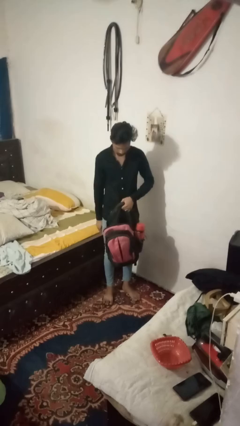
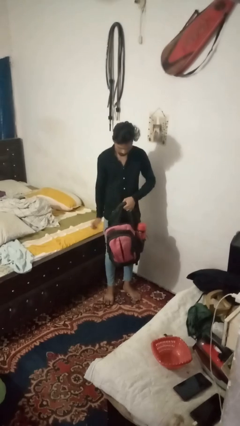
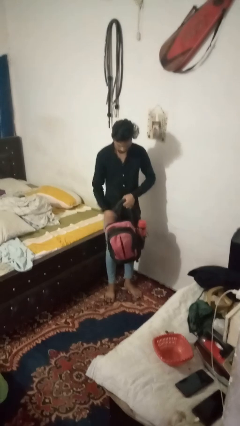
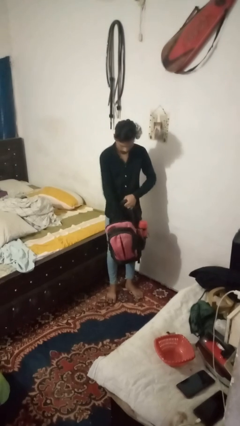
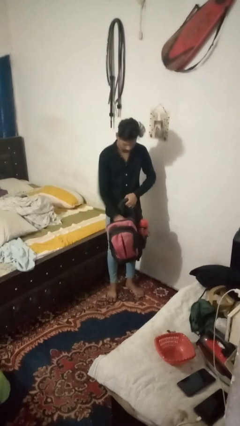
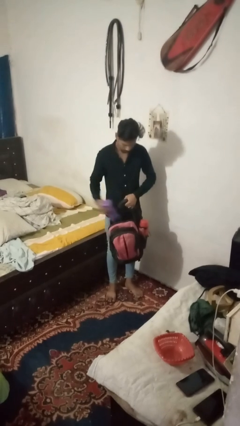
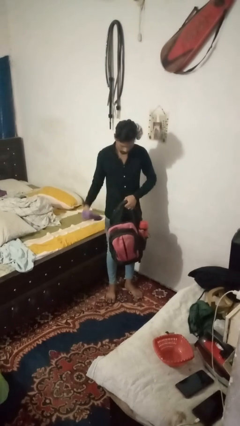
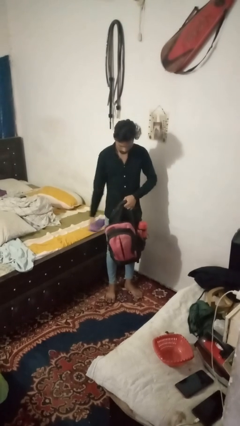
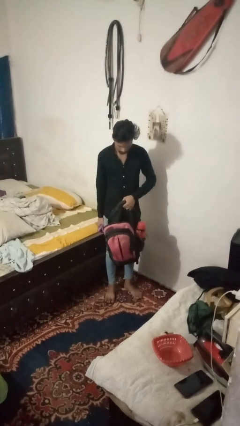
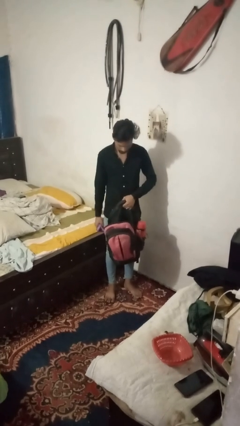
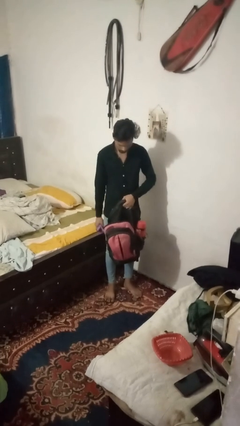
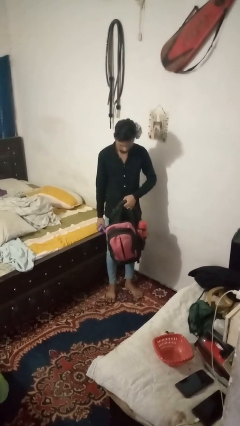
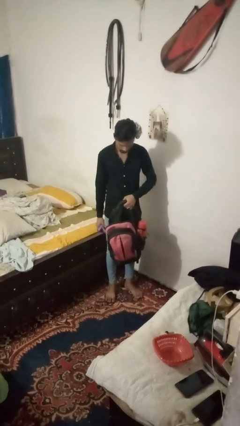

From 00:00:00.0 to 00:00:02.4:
person takes object from bag

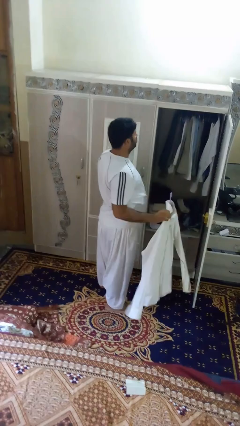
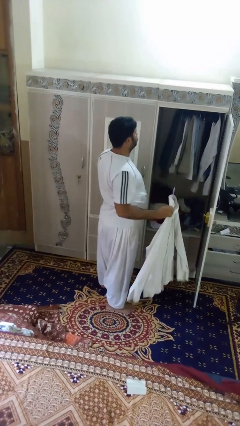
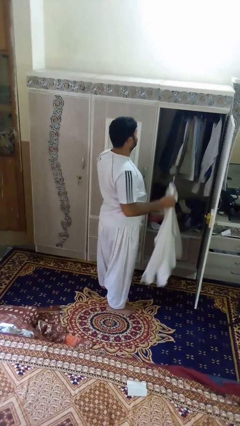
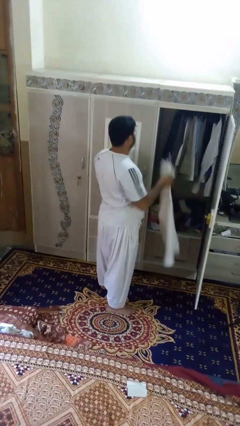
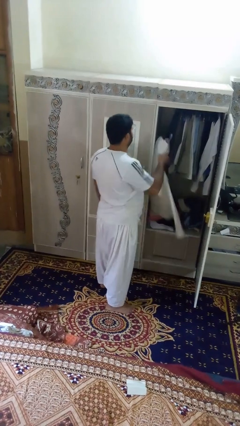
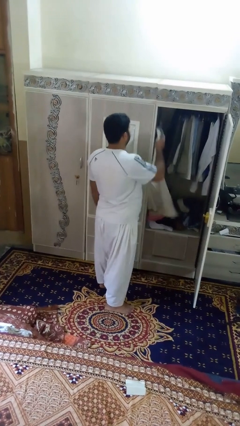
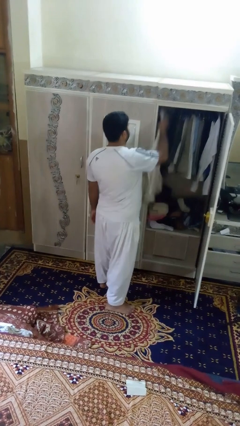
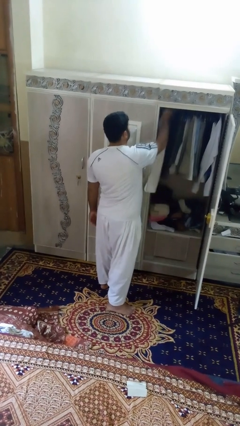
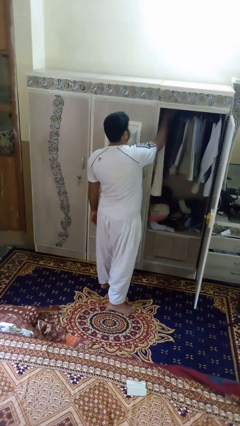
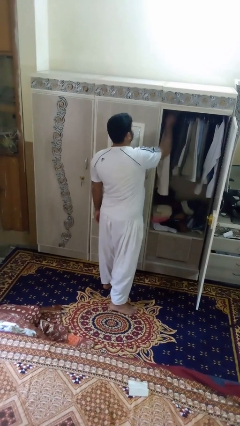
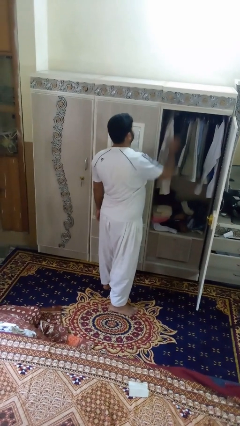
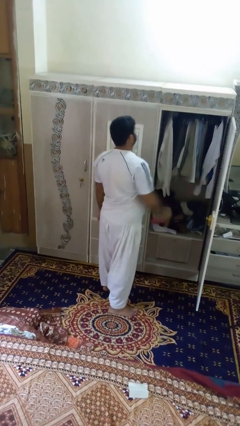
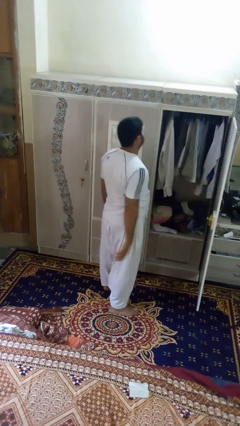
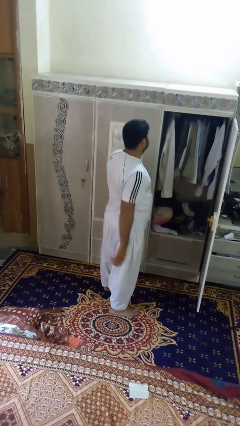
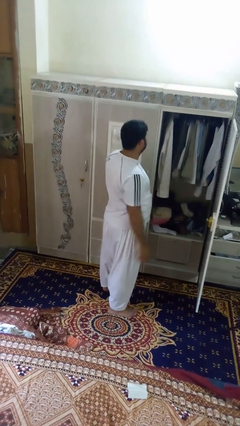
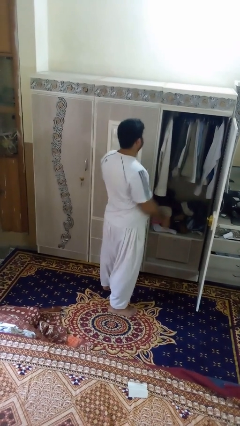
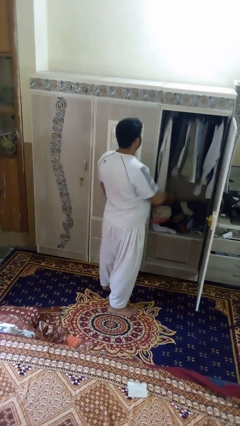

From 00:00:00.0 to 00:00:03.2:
person puts clothes into closet

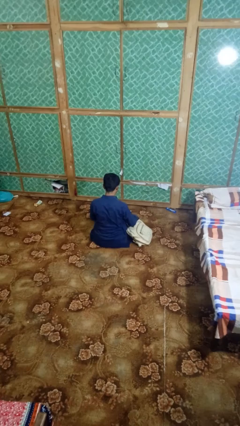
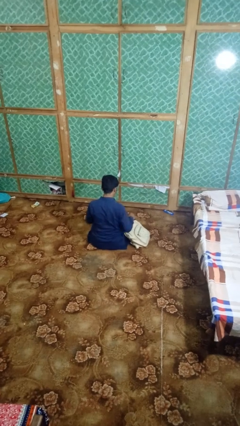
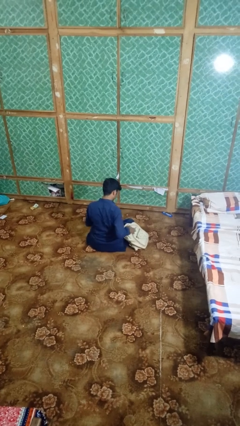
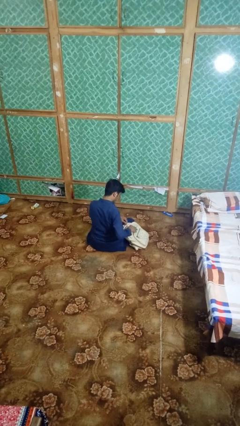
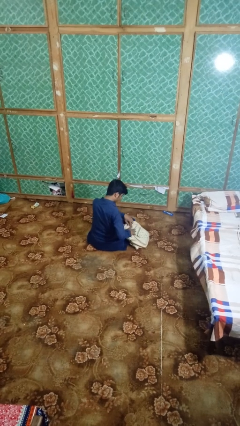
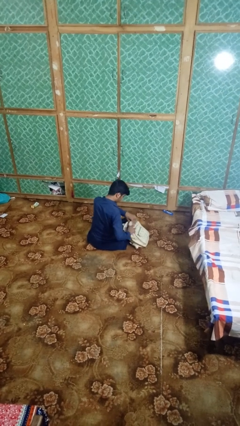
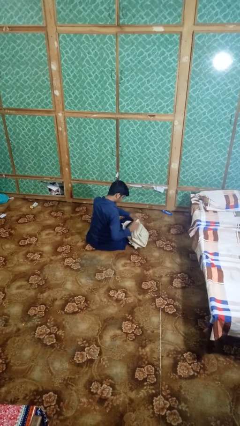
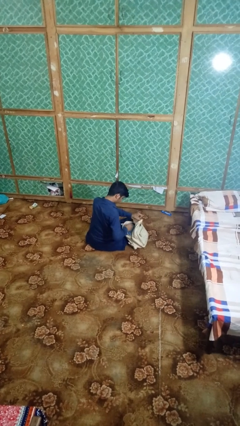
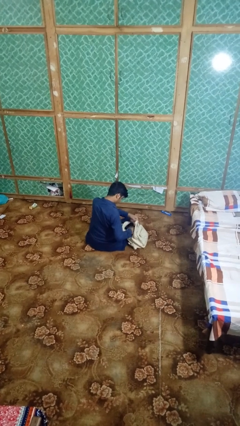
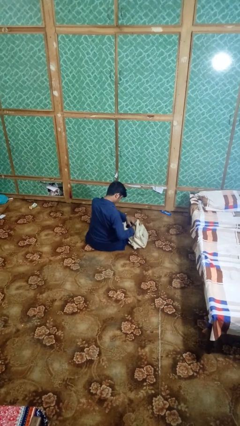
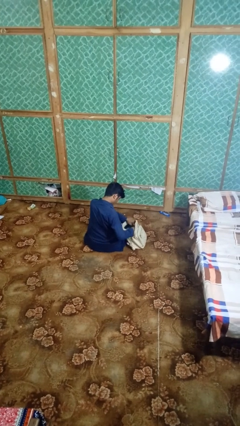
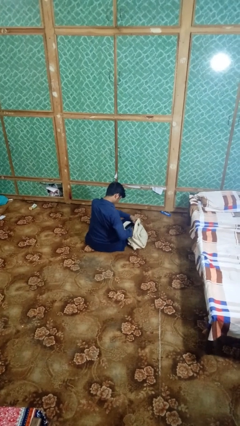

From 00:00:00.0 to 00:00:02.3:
person searches in backpack

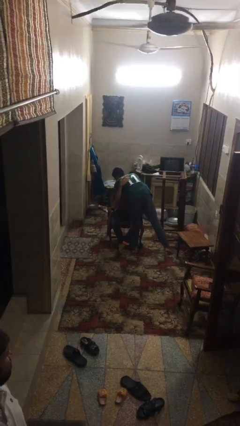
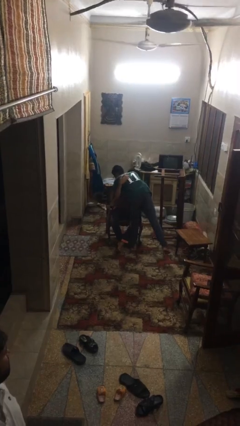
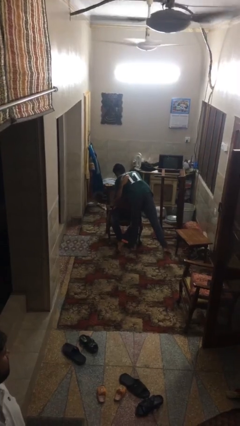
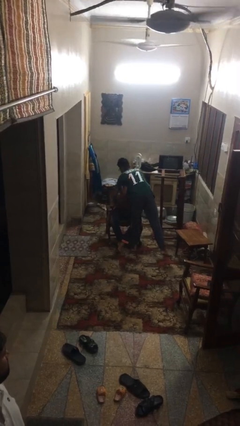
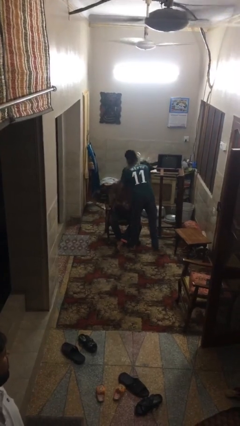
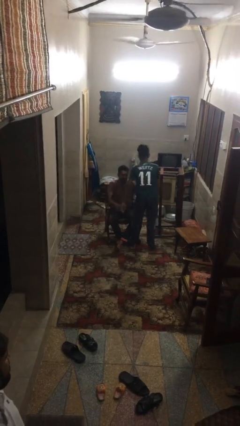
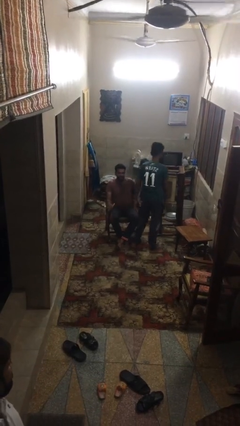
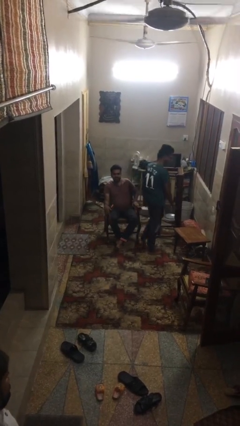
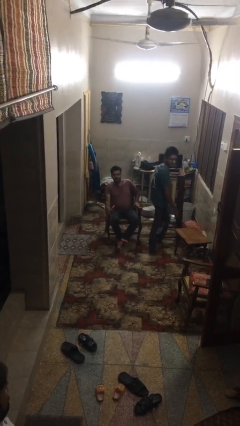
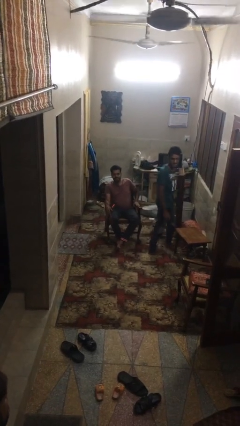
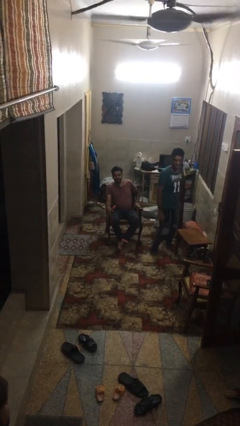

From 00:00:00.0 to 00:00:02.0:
person embraces person

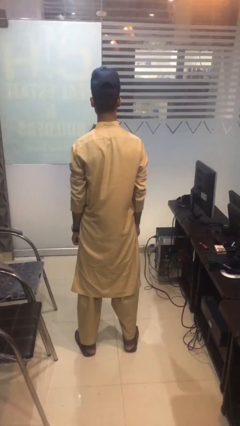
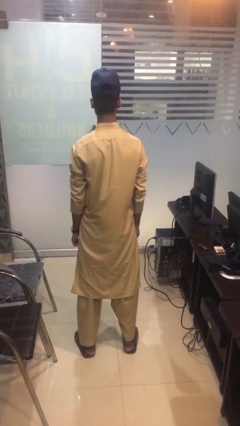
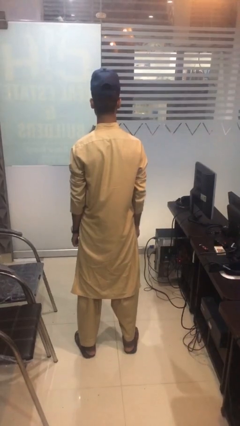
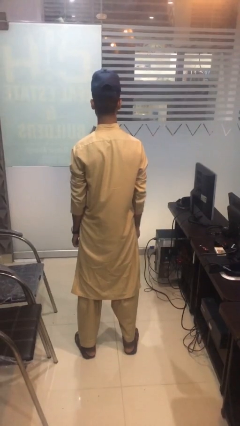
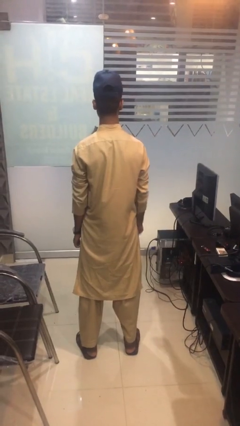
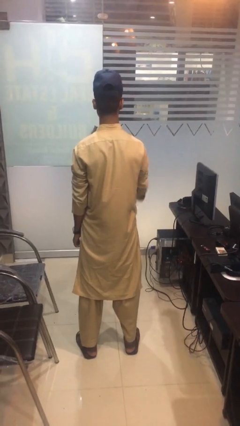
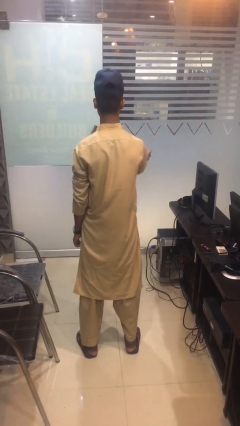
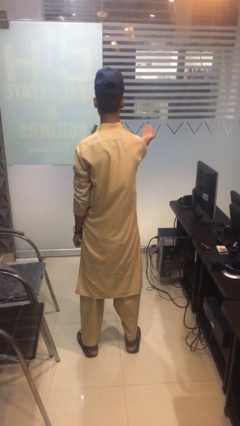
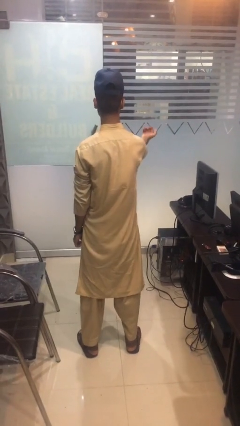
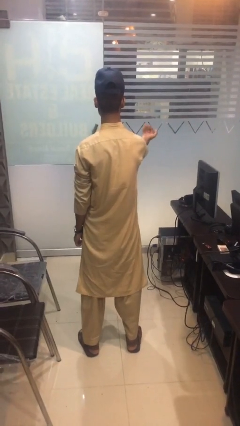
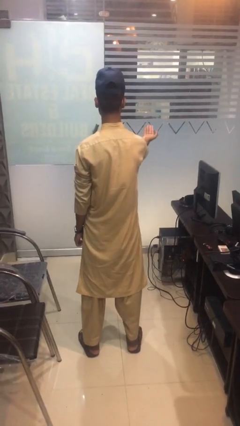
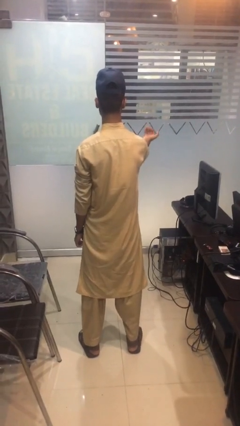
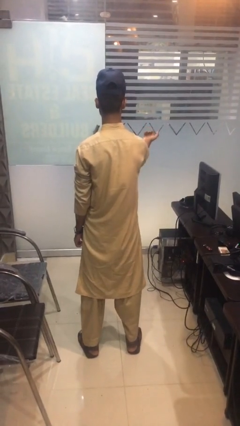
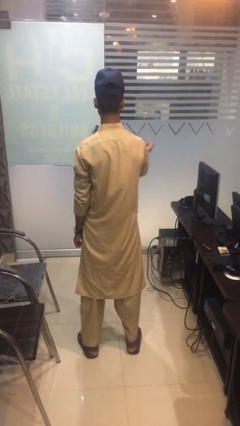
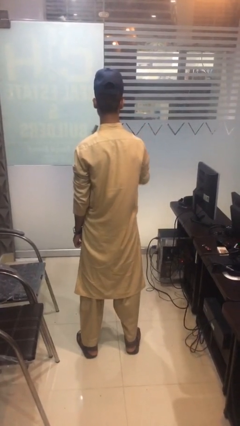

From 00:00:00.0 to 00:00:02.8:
person gestures come here

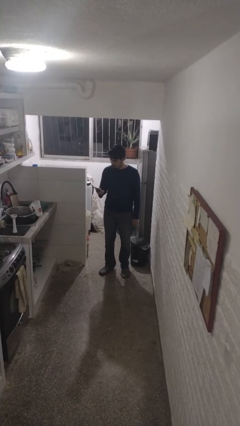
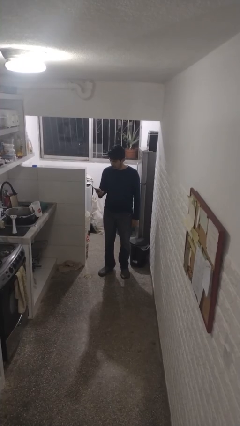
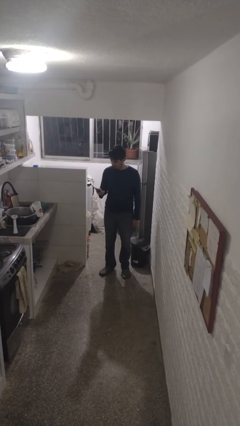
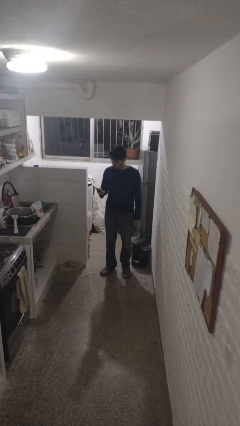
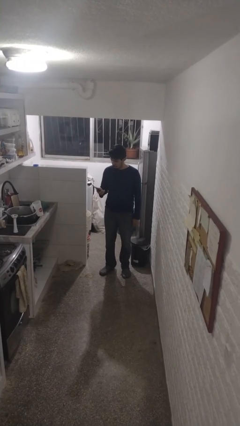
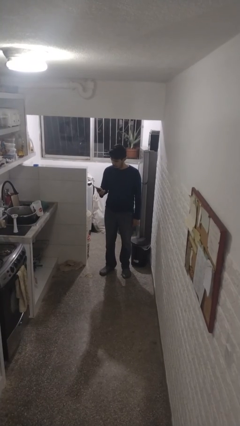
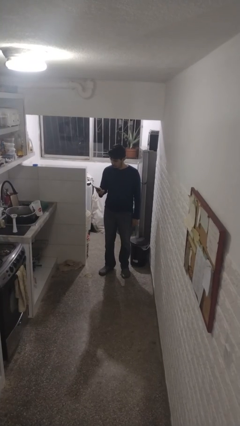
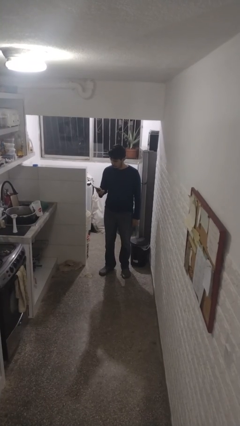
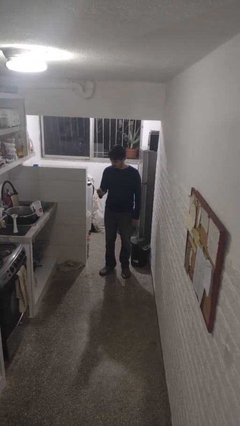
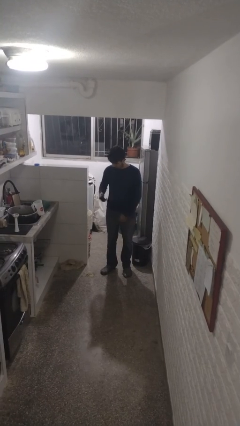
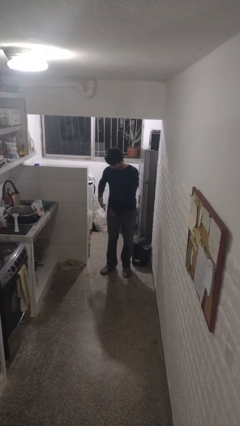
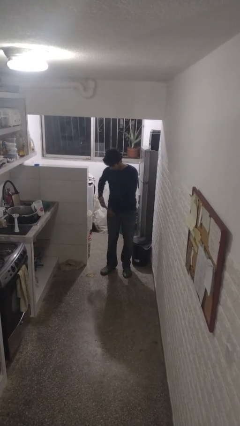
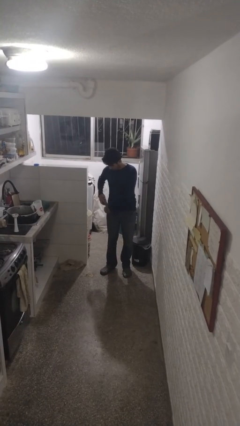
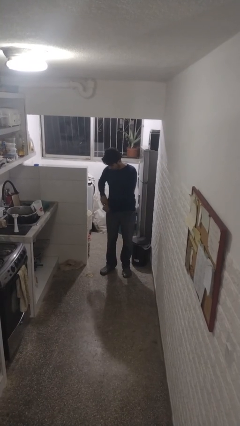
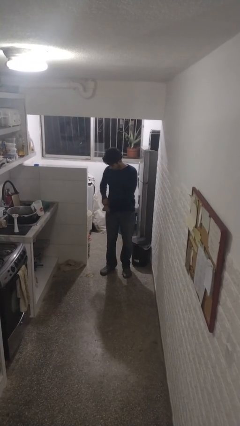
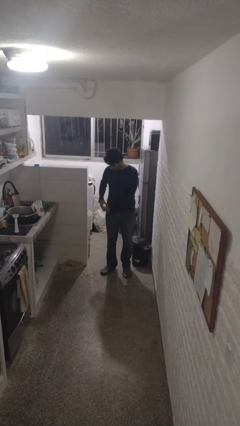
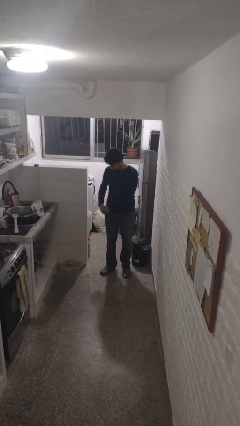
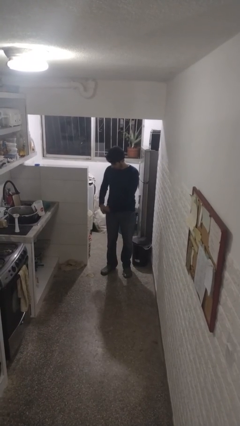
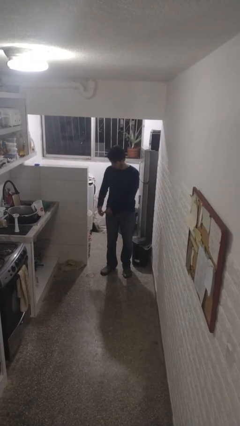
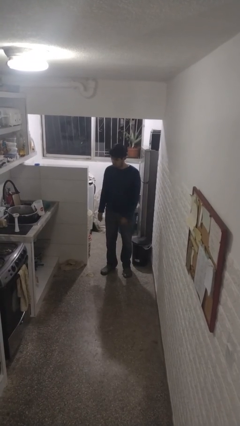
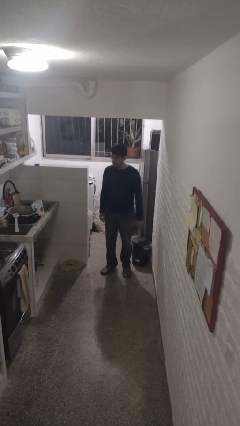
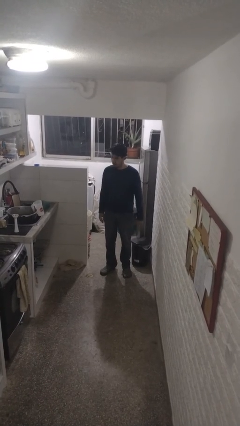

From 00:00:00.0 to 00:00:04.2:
person puts phone into pocket

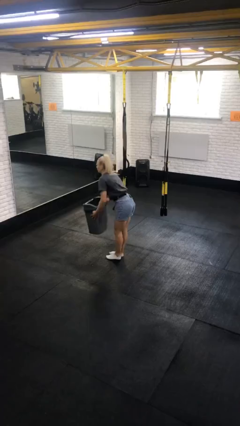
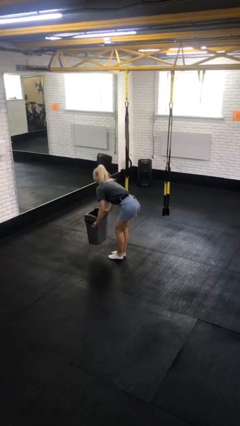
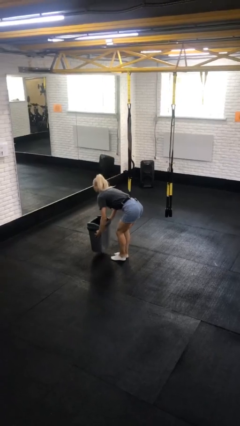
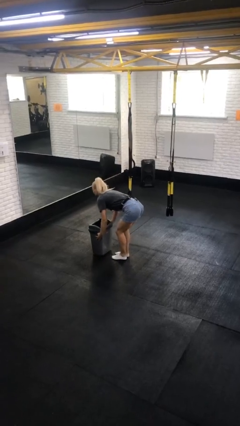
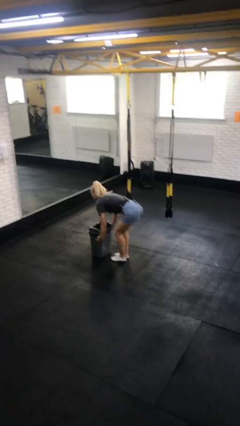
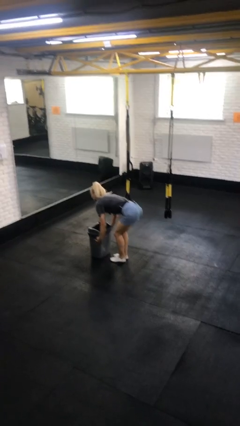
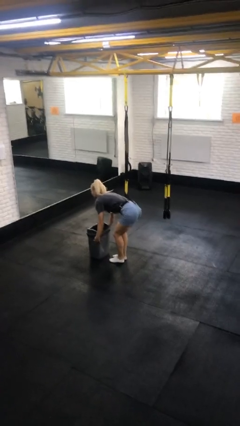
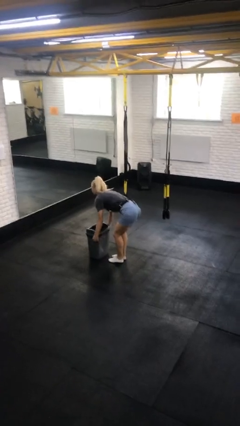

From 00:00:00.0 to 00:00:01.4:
person puts down object on floor
